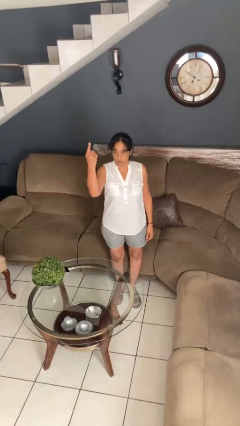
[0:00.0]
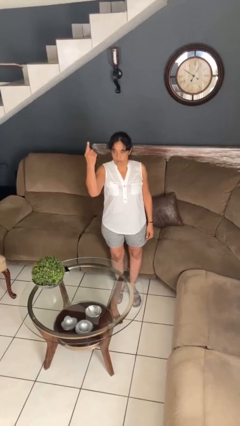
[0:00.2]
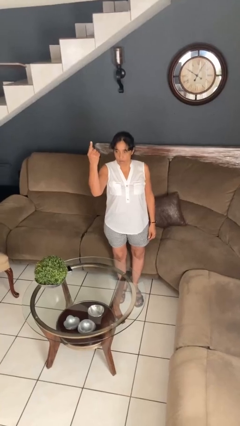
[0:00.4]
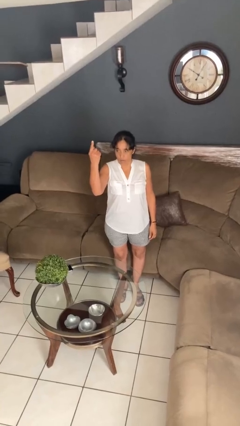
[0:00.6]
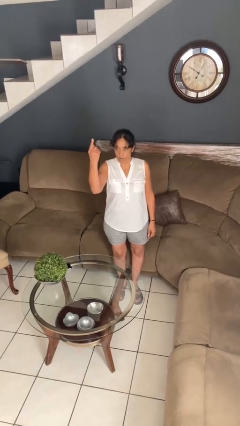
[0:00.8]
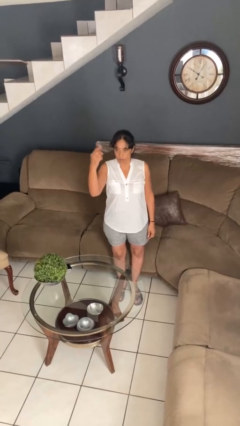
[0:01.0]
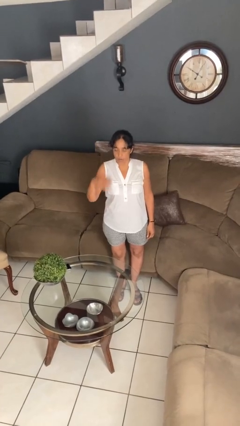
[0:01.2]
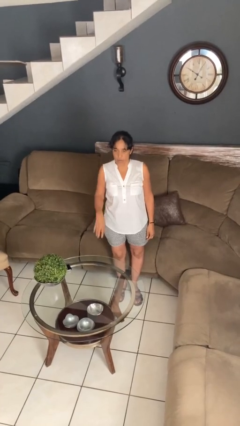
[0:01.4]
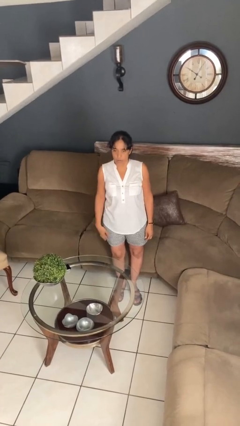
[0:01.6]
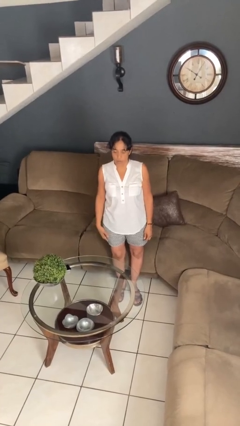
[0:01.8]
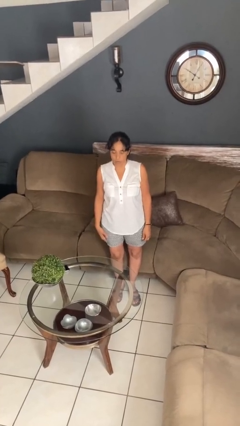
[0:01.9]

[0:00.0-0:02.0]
person gestures number one

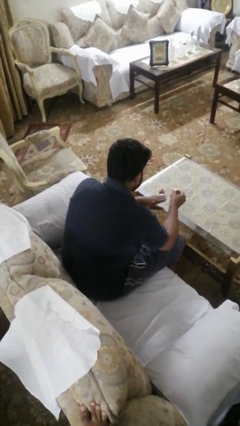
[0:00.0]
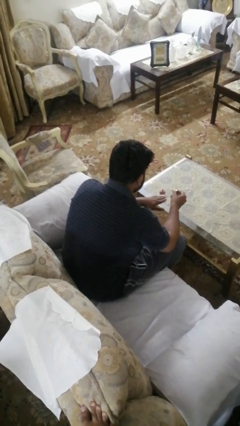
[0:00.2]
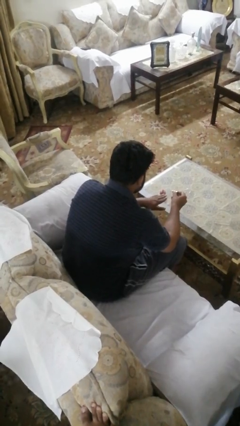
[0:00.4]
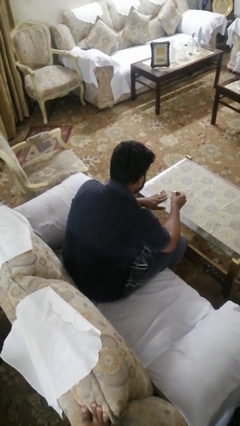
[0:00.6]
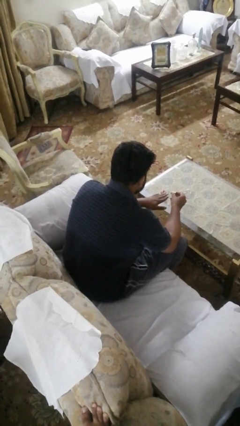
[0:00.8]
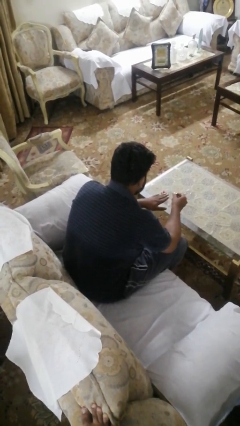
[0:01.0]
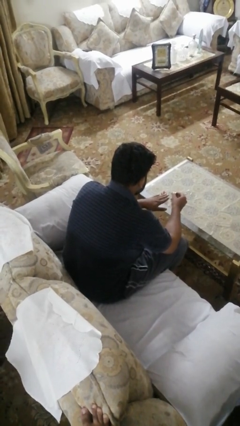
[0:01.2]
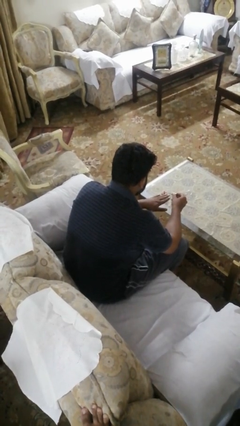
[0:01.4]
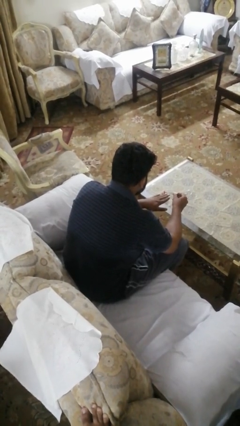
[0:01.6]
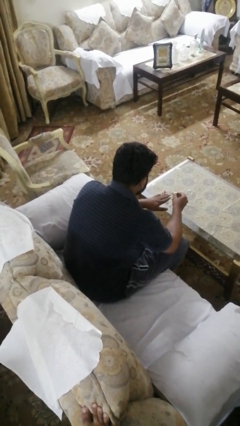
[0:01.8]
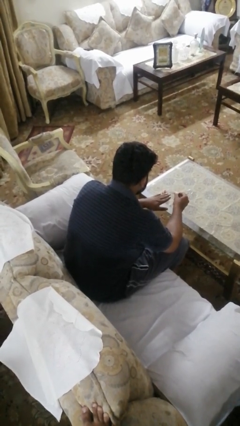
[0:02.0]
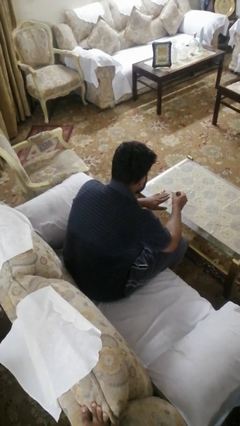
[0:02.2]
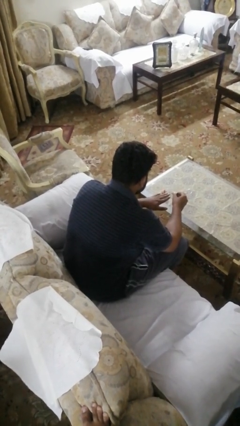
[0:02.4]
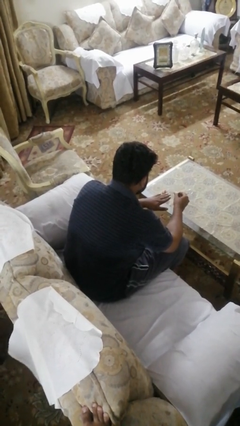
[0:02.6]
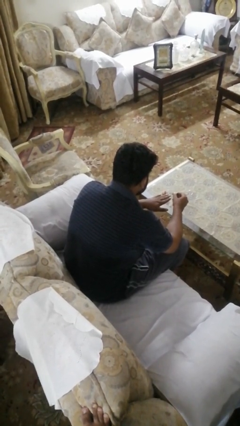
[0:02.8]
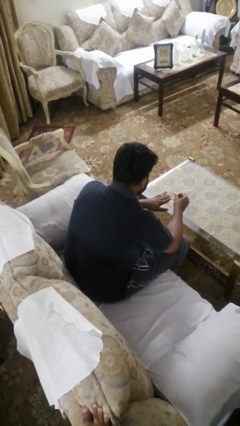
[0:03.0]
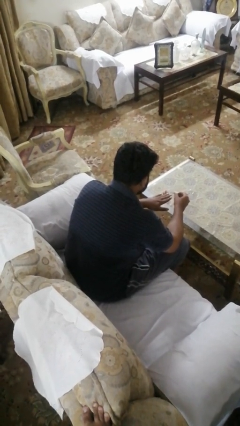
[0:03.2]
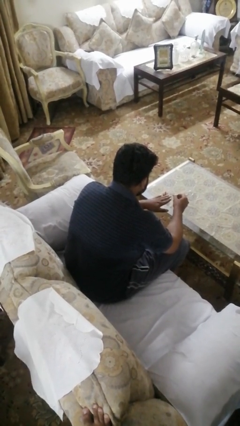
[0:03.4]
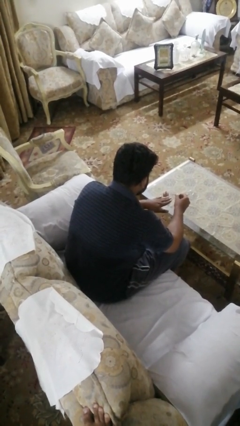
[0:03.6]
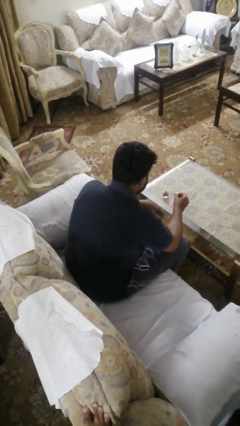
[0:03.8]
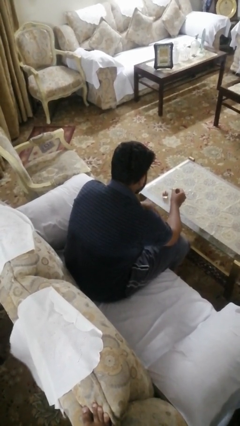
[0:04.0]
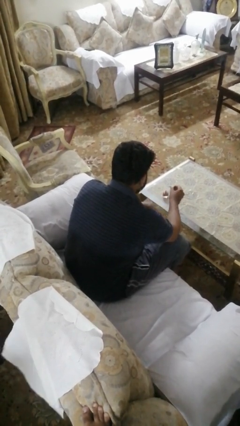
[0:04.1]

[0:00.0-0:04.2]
person paints fingernails

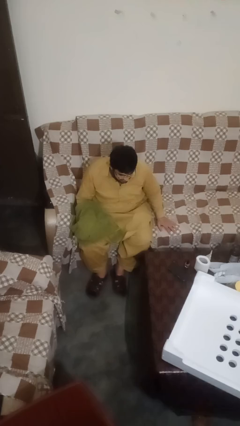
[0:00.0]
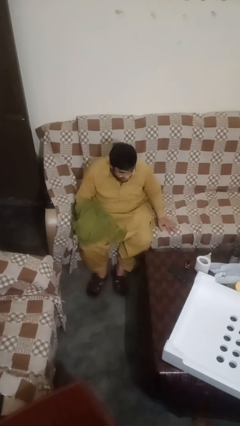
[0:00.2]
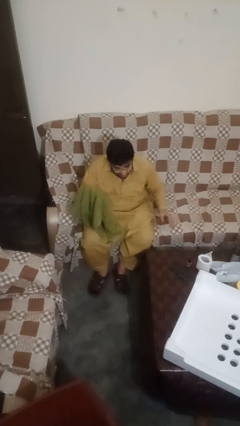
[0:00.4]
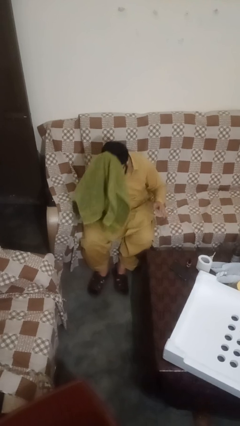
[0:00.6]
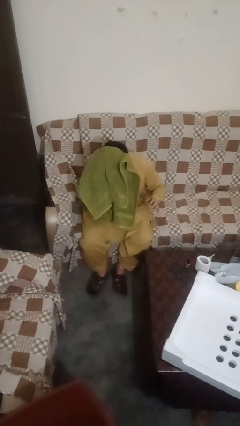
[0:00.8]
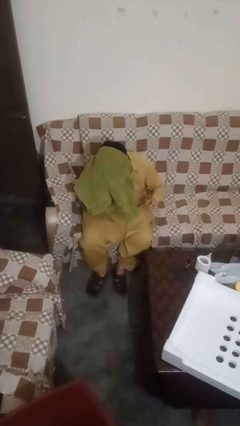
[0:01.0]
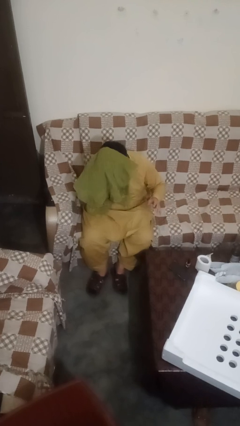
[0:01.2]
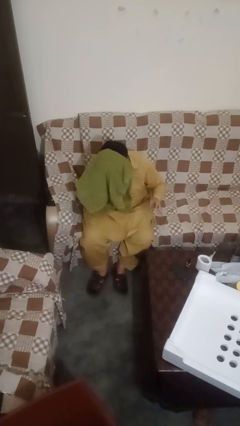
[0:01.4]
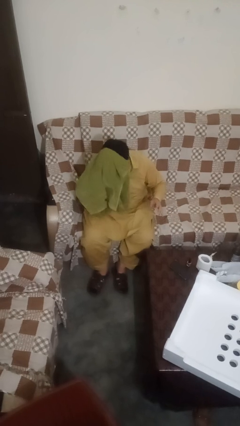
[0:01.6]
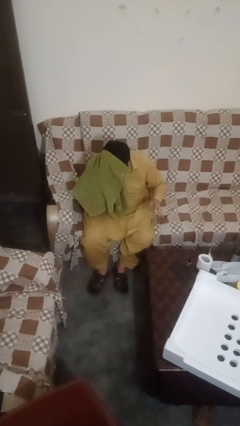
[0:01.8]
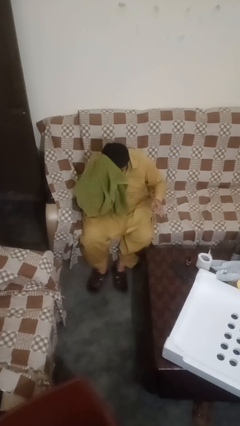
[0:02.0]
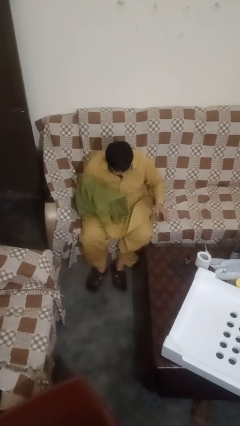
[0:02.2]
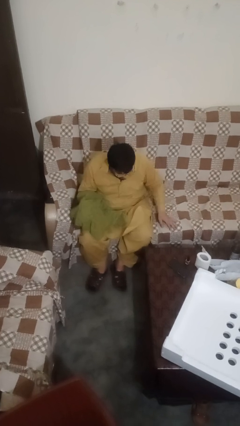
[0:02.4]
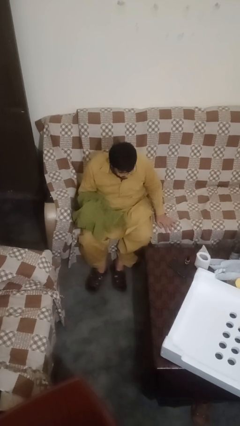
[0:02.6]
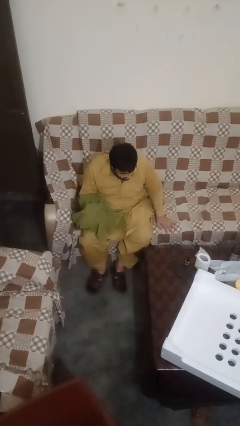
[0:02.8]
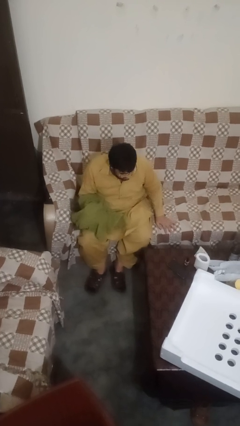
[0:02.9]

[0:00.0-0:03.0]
person dries hair with towel

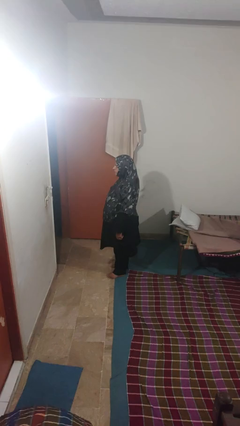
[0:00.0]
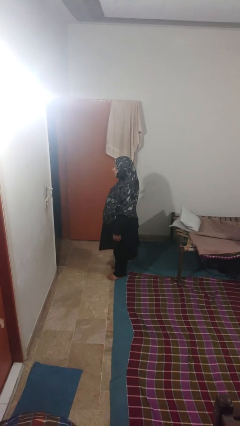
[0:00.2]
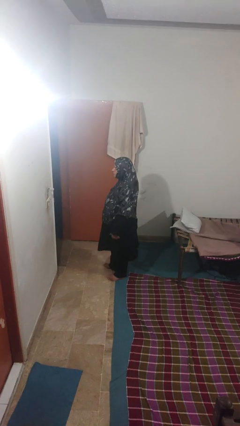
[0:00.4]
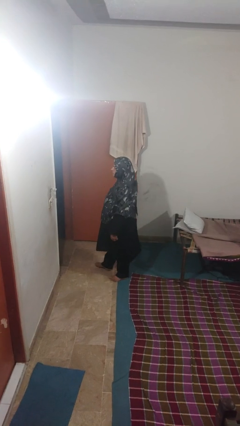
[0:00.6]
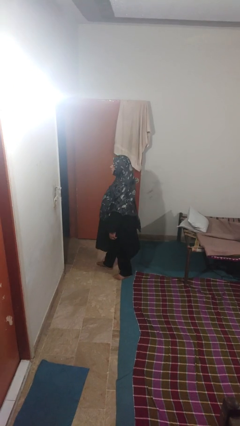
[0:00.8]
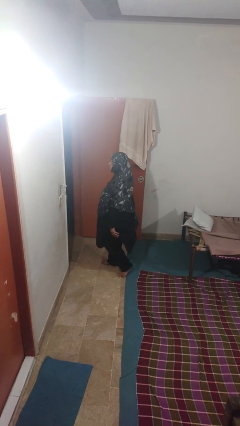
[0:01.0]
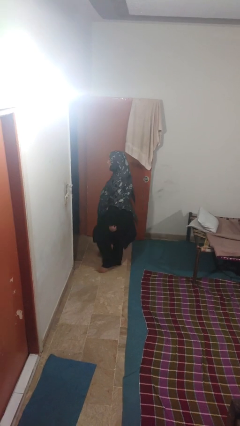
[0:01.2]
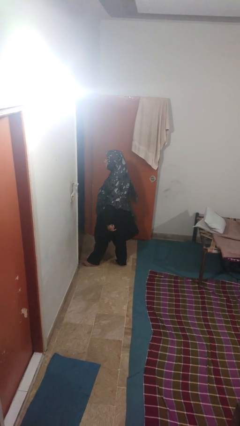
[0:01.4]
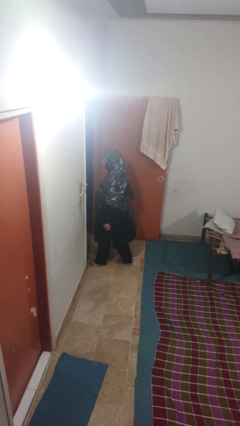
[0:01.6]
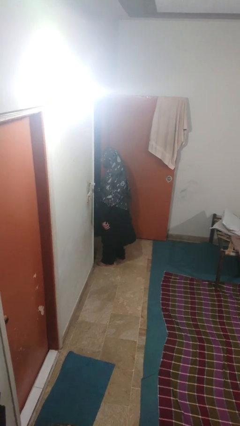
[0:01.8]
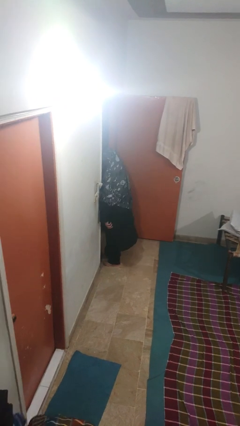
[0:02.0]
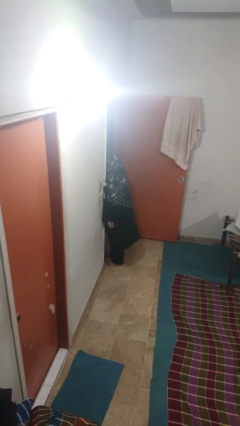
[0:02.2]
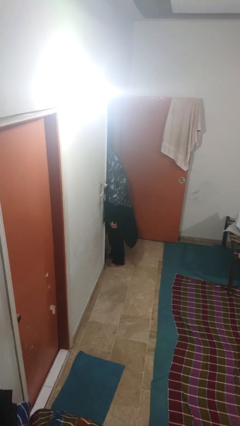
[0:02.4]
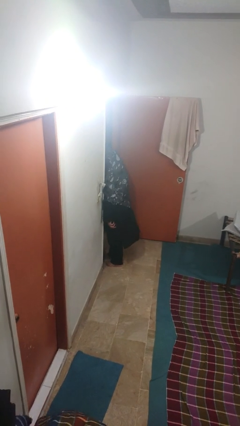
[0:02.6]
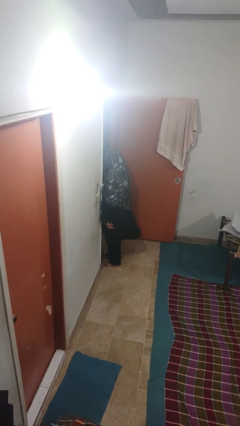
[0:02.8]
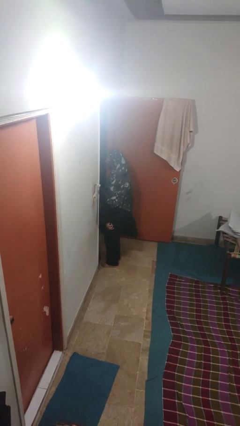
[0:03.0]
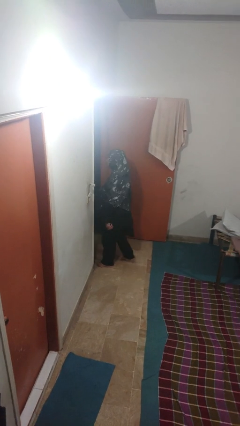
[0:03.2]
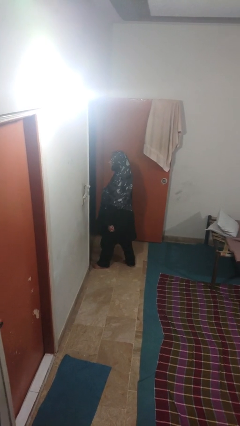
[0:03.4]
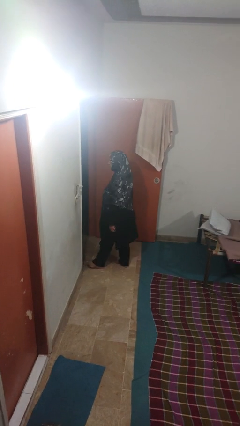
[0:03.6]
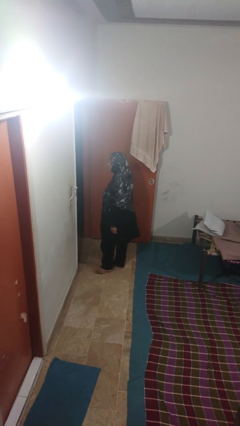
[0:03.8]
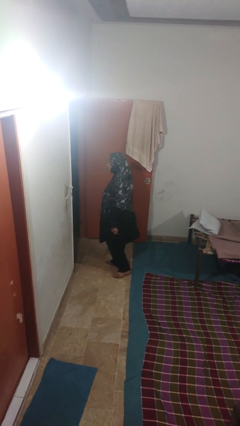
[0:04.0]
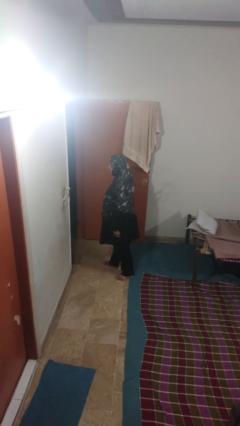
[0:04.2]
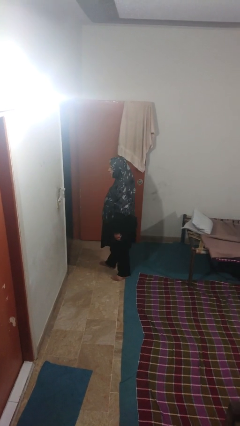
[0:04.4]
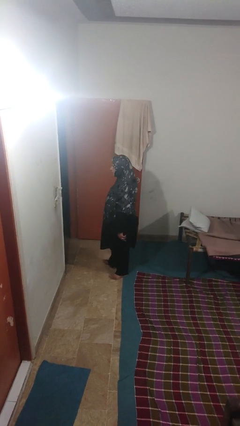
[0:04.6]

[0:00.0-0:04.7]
person bumps into wall

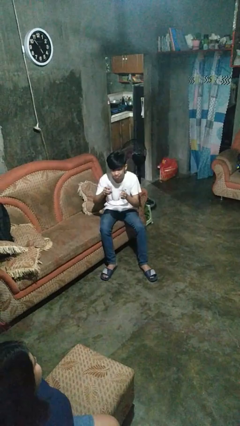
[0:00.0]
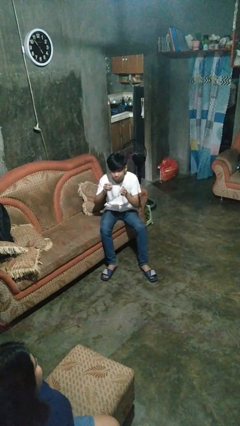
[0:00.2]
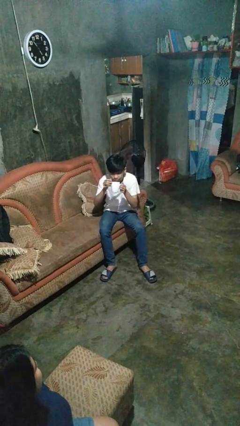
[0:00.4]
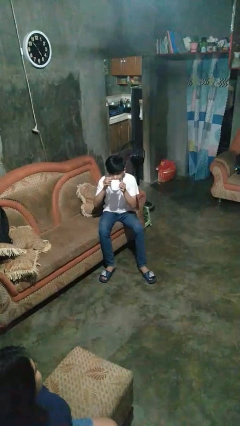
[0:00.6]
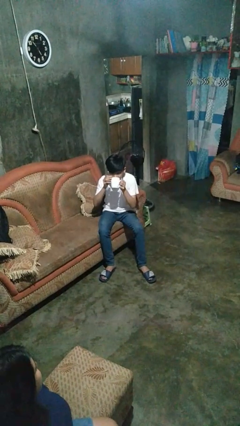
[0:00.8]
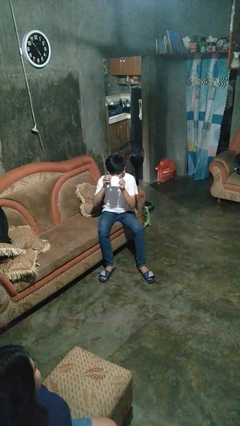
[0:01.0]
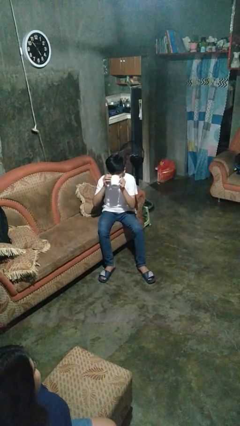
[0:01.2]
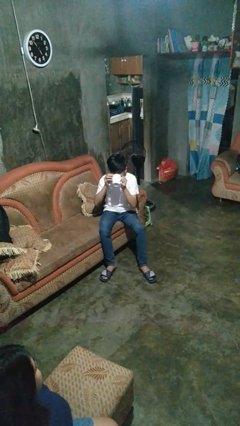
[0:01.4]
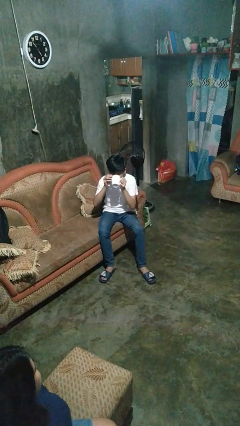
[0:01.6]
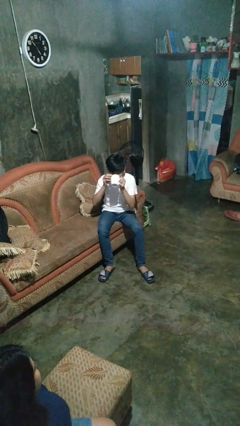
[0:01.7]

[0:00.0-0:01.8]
person drinks from mug

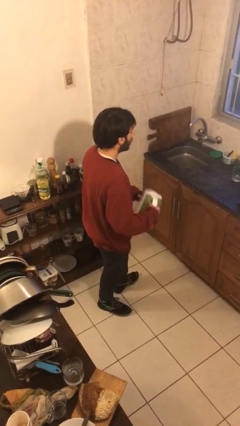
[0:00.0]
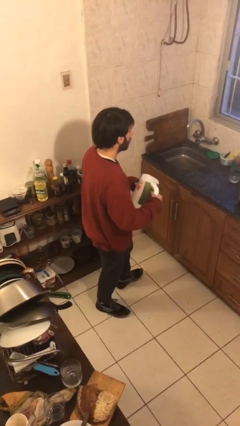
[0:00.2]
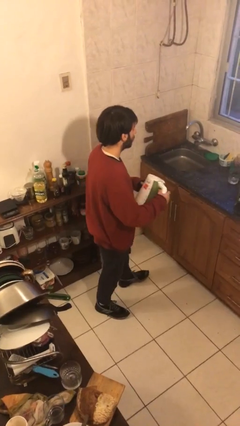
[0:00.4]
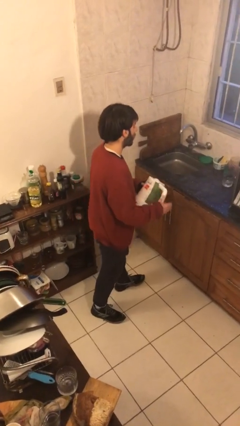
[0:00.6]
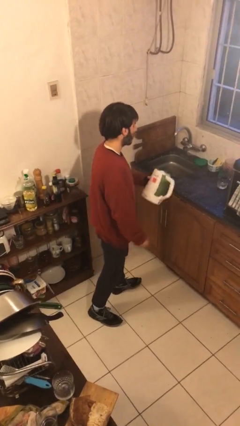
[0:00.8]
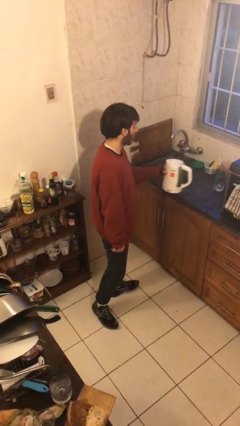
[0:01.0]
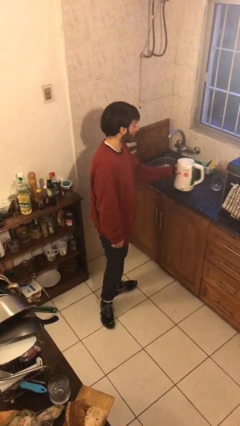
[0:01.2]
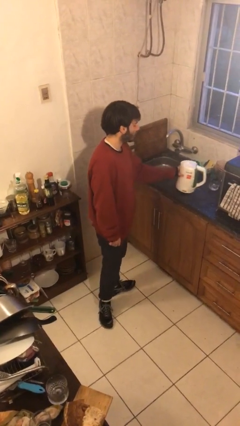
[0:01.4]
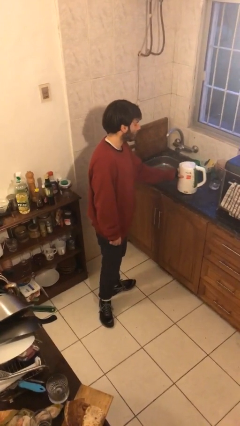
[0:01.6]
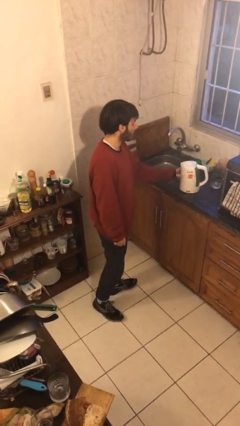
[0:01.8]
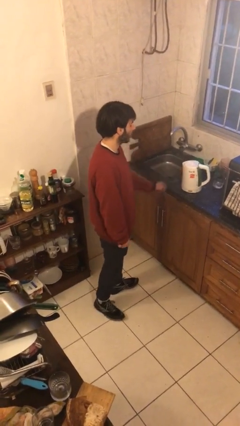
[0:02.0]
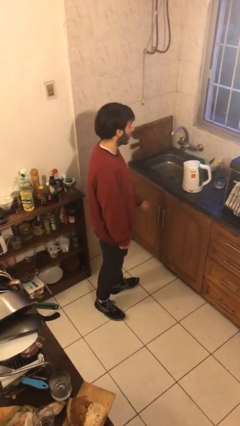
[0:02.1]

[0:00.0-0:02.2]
person puts down object on countertop
